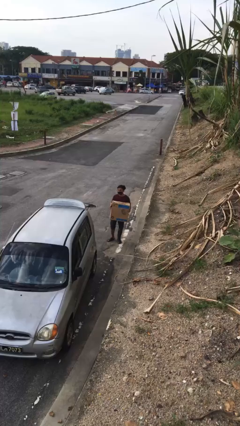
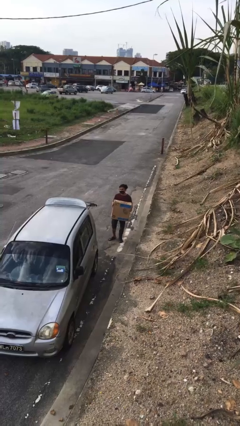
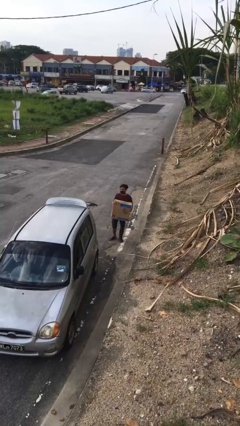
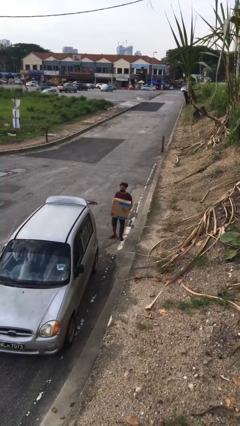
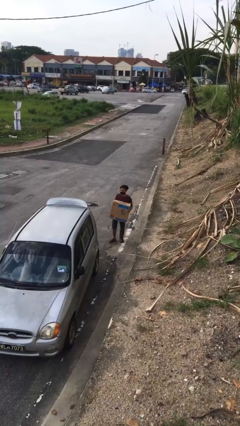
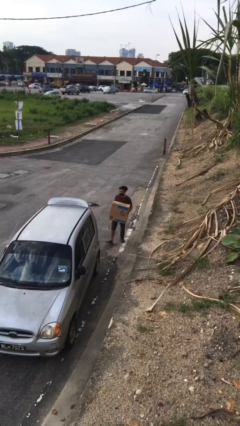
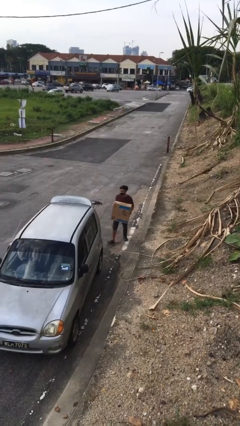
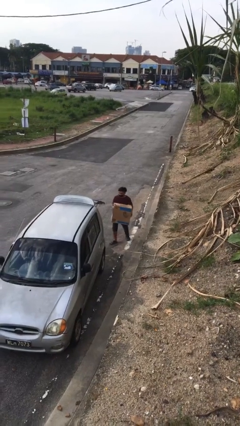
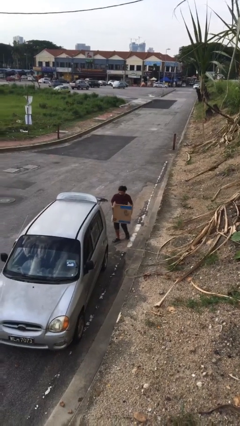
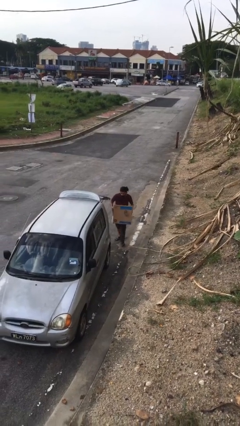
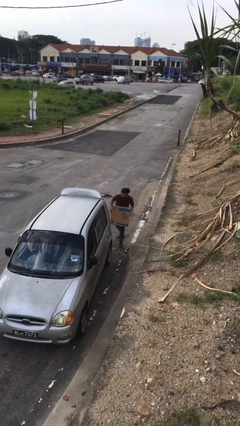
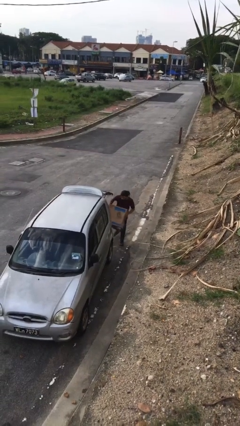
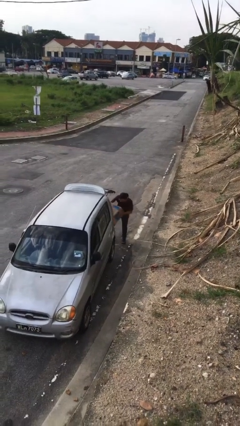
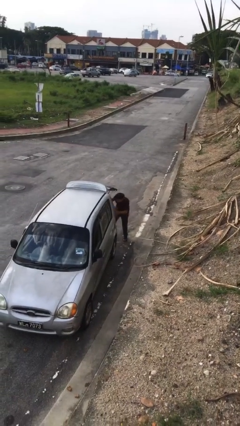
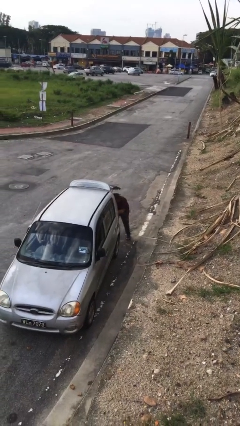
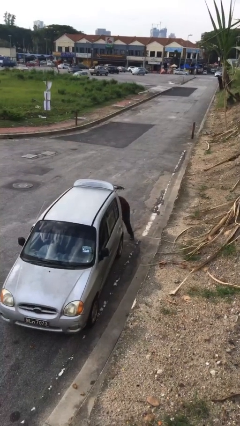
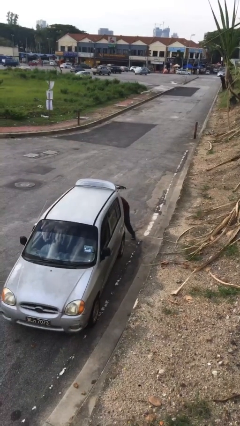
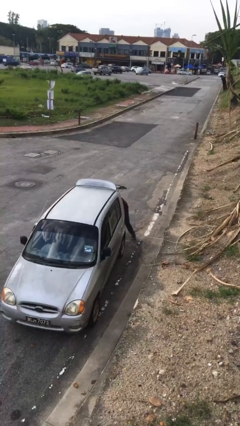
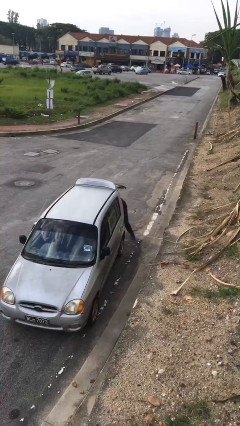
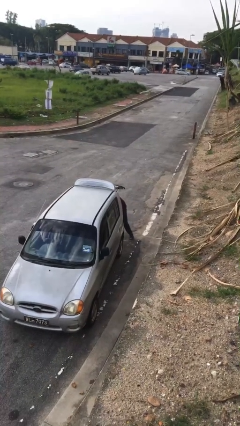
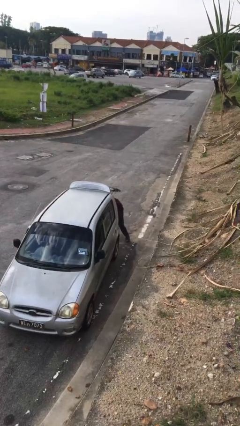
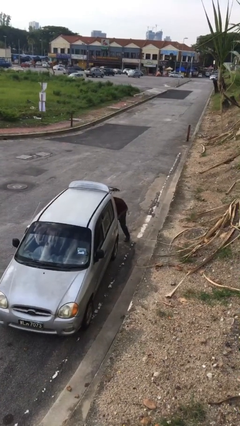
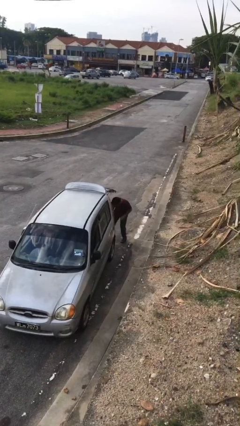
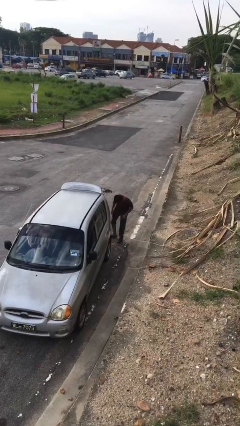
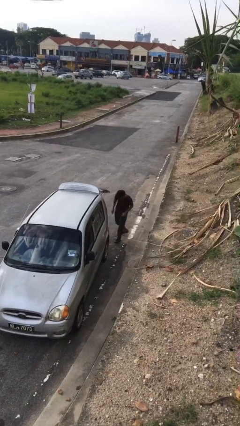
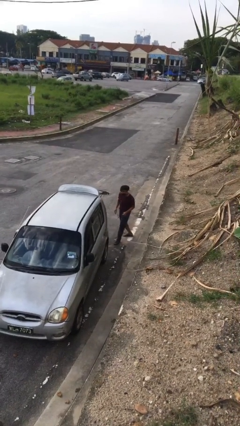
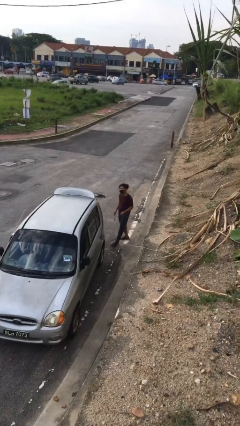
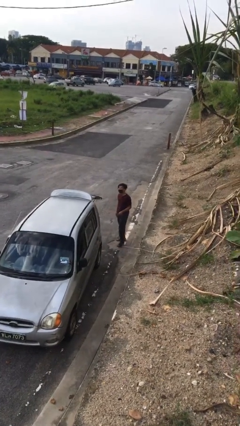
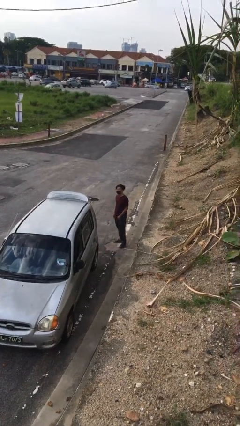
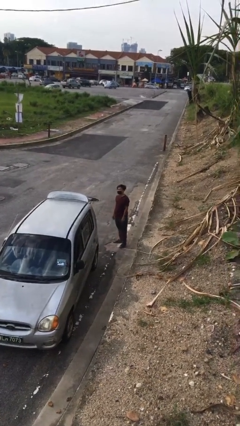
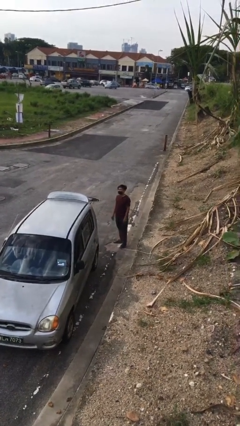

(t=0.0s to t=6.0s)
person loads car

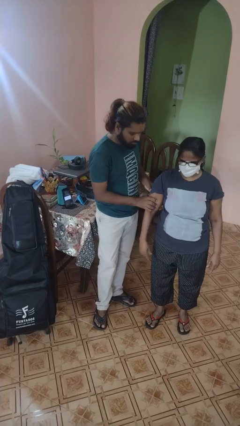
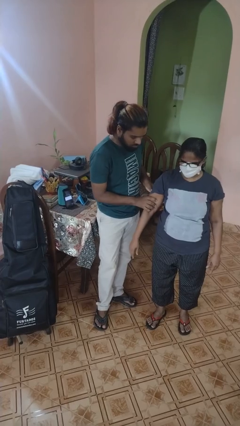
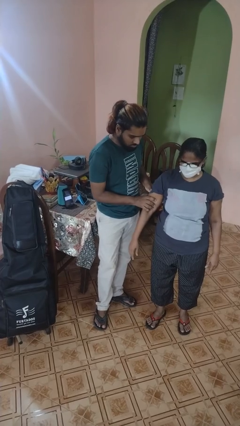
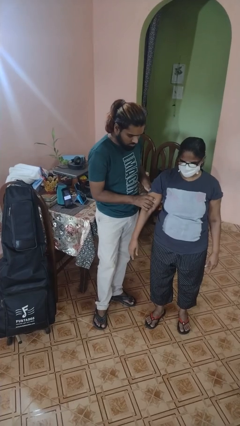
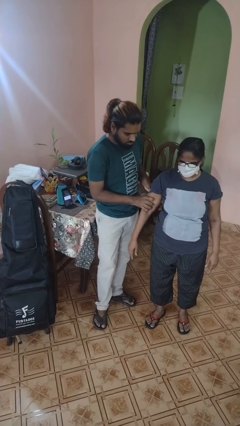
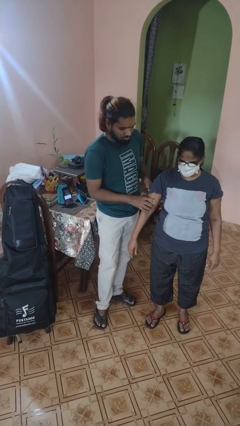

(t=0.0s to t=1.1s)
person grabs person by bicep

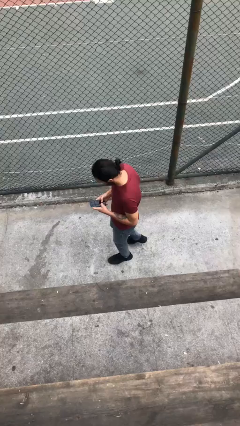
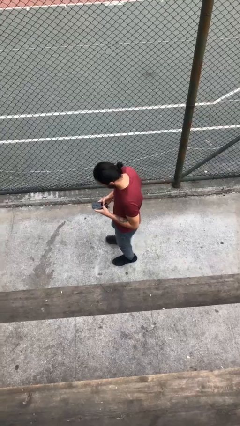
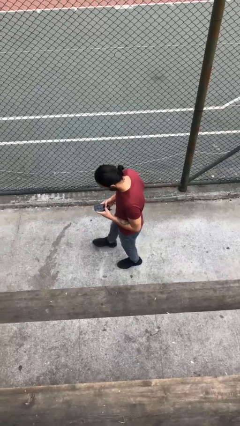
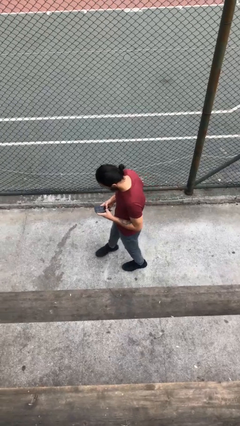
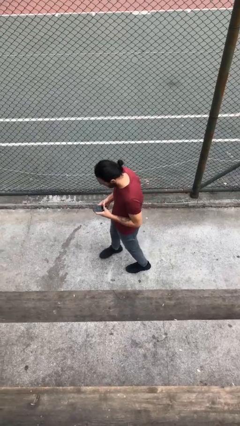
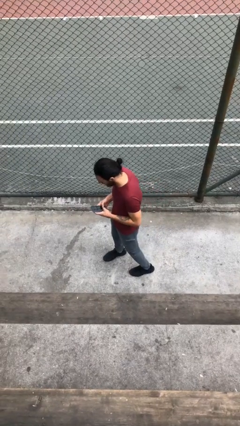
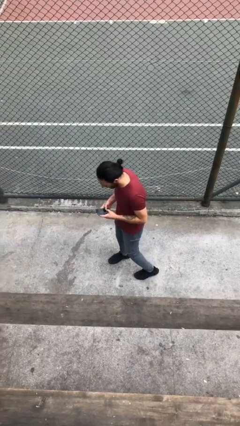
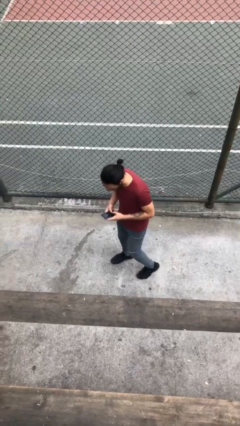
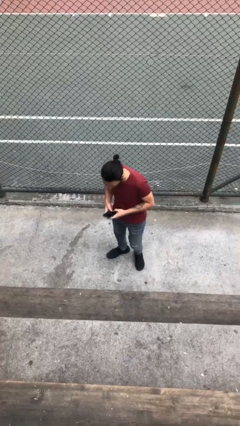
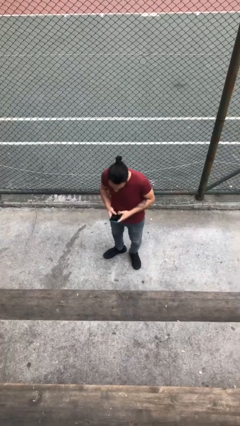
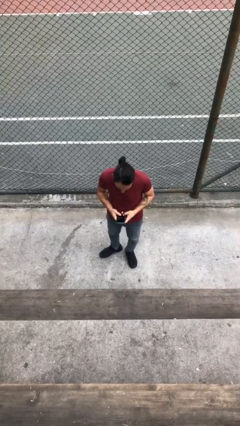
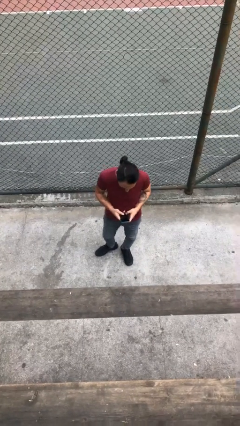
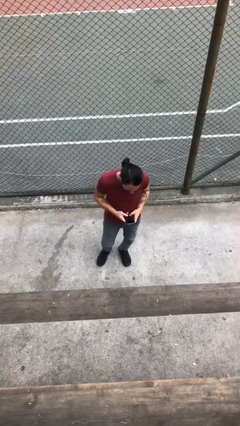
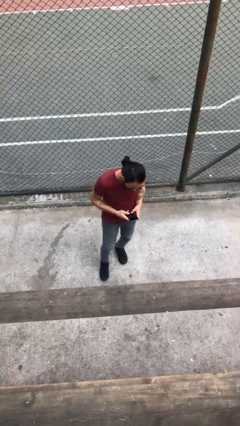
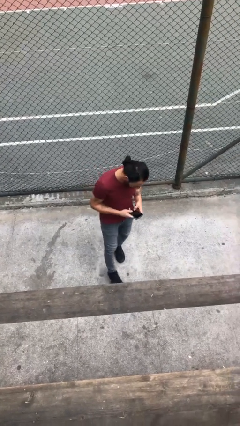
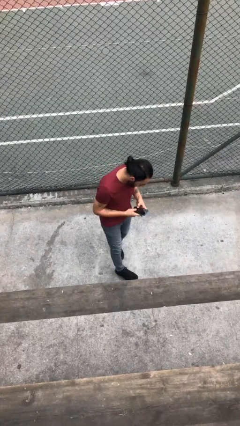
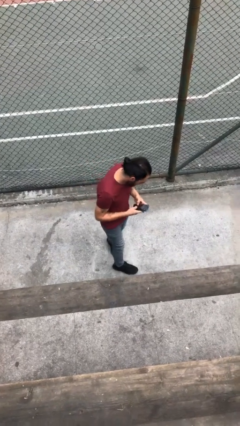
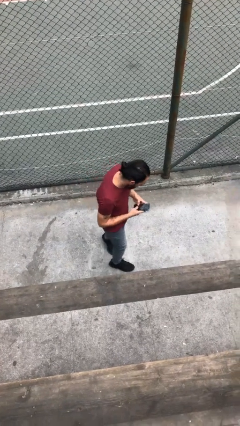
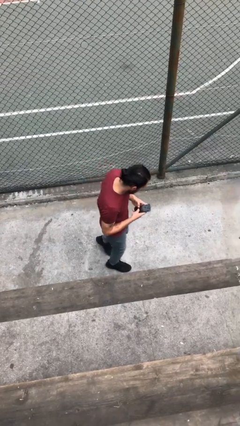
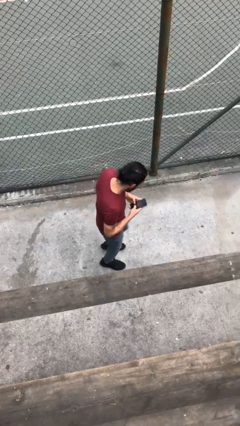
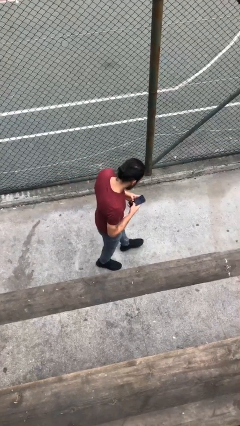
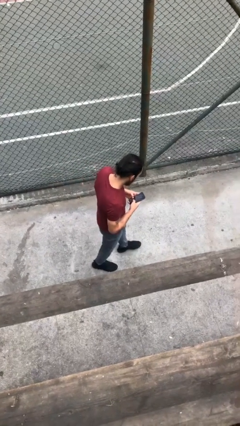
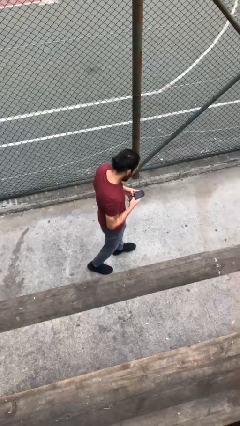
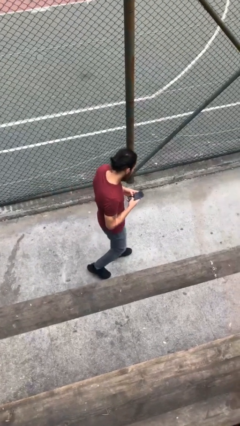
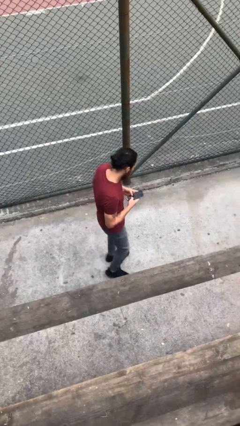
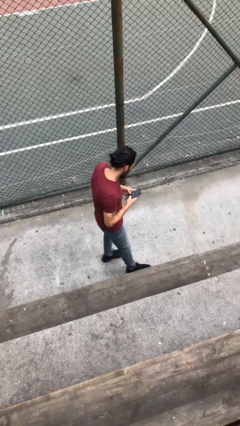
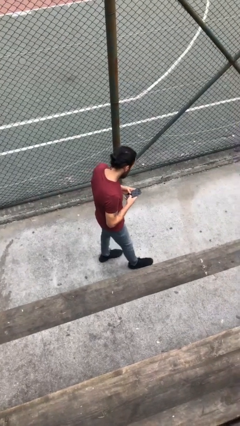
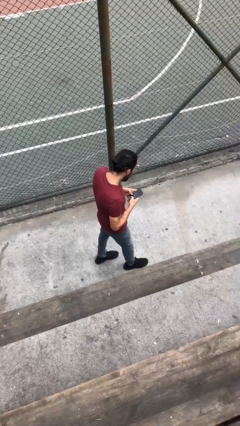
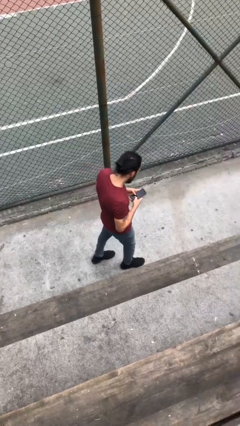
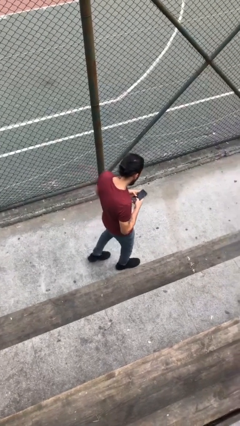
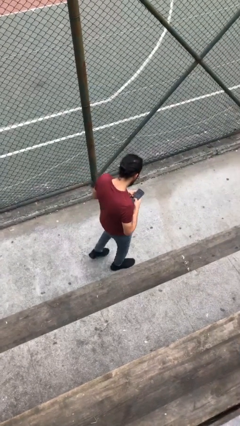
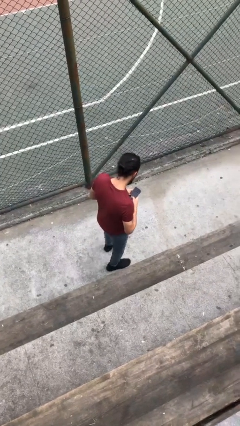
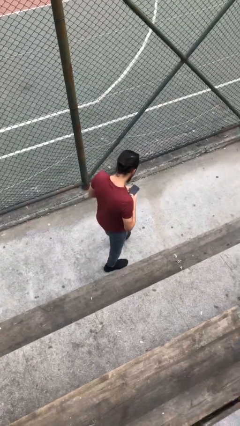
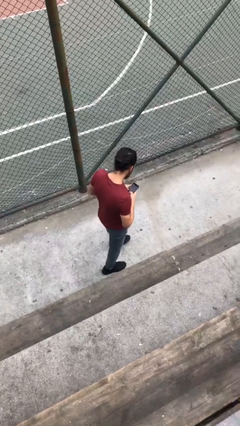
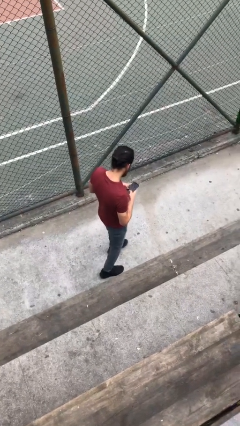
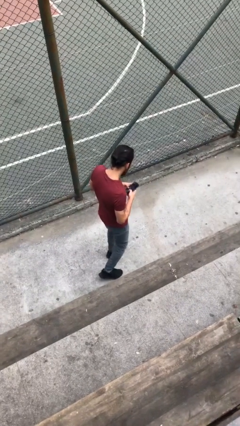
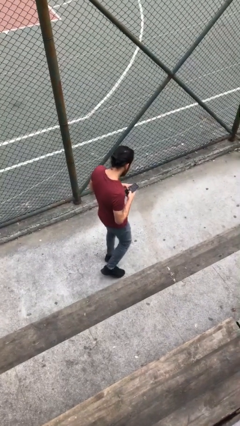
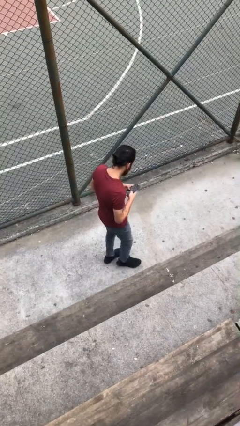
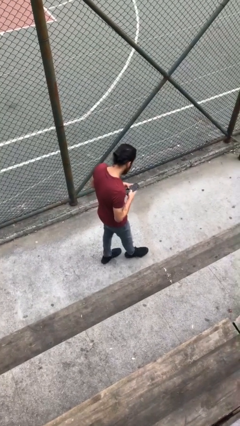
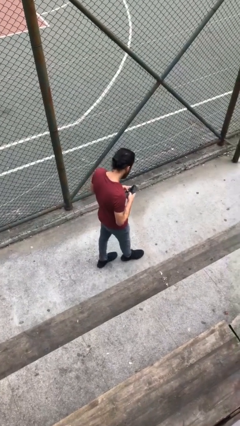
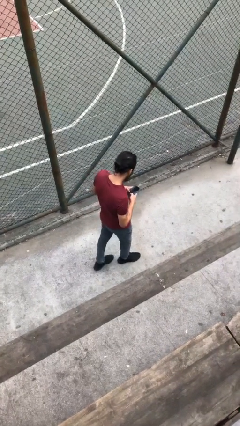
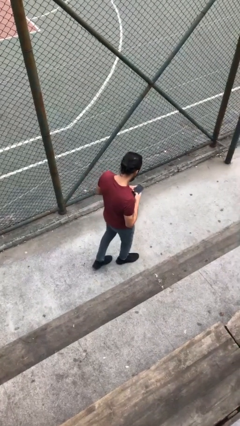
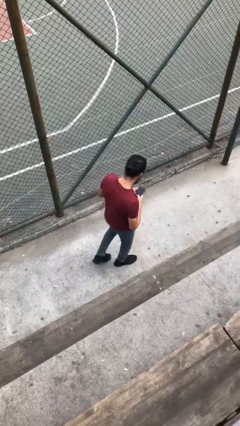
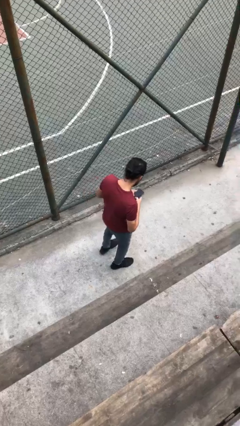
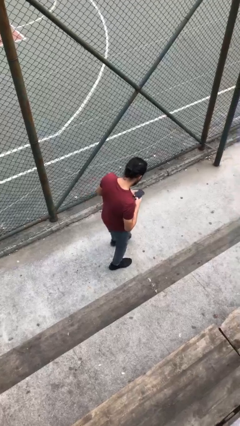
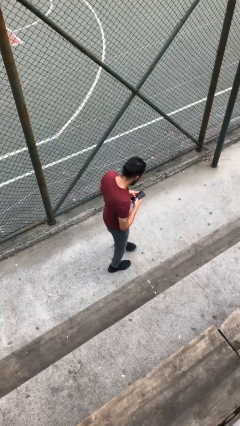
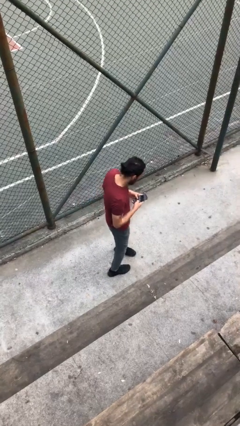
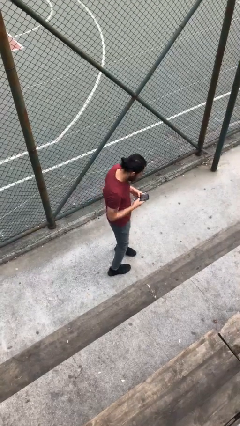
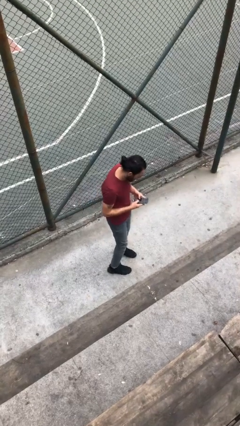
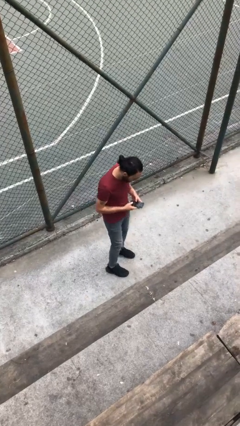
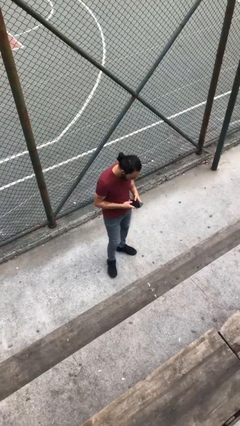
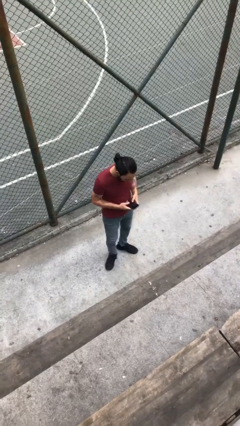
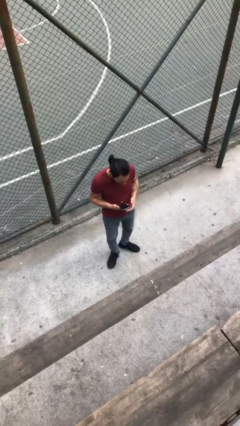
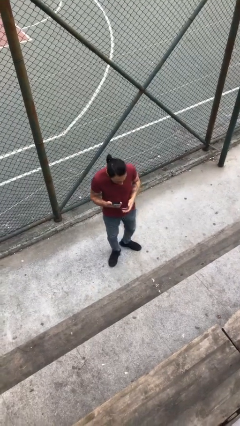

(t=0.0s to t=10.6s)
person texts on phone

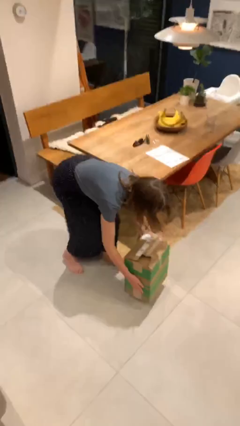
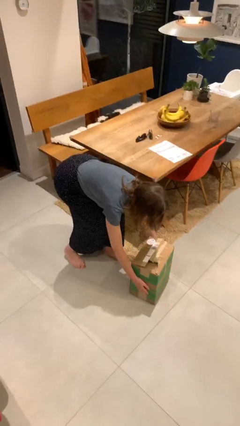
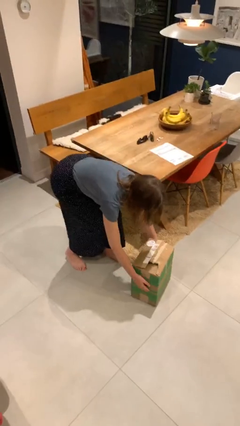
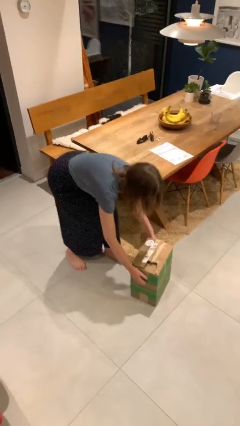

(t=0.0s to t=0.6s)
person puts down object on floor
